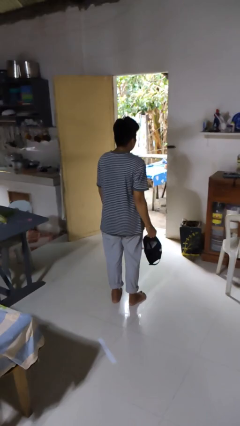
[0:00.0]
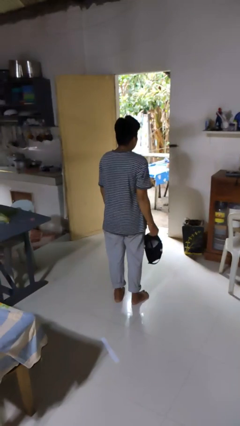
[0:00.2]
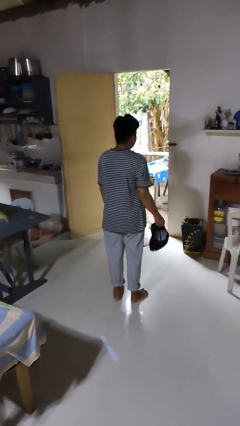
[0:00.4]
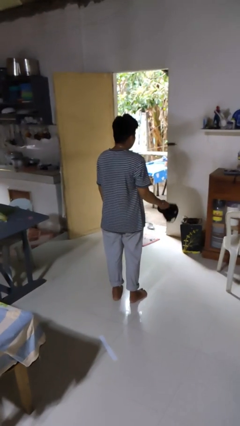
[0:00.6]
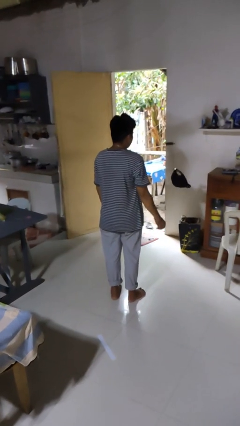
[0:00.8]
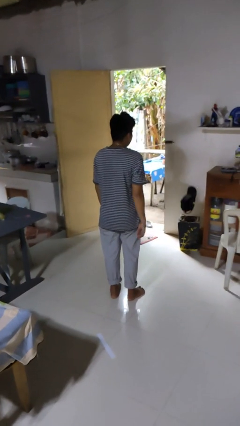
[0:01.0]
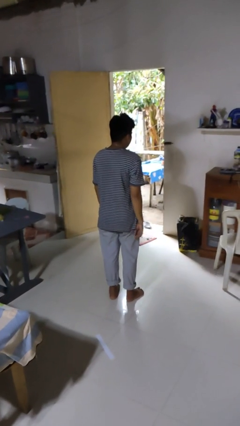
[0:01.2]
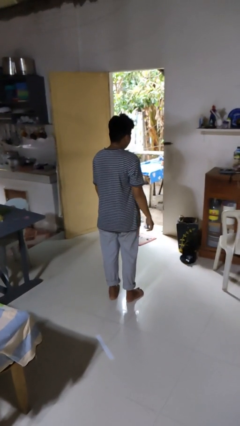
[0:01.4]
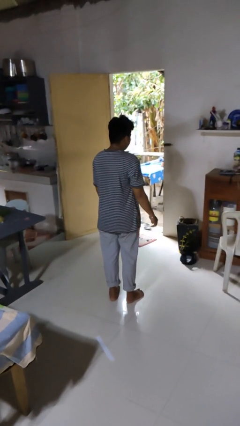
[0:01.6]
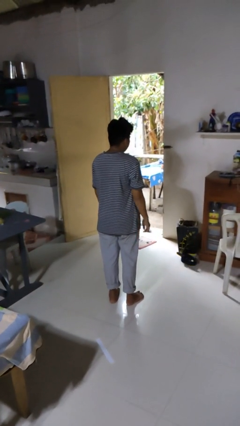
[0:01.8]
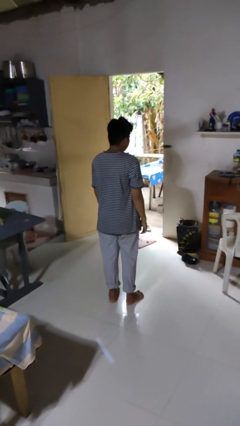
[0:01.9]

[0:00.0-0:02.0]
person throws object into air

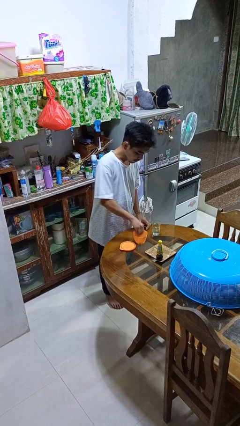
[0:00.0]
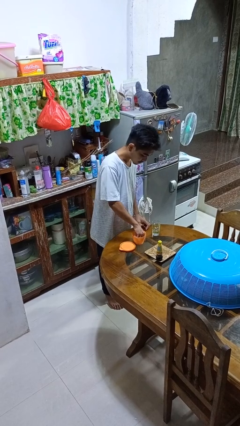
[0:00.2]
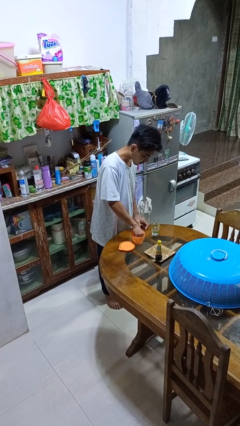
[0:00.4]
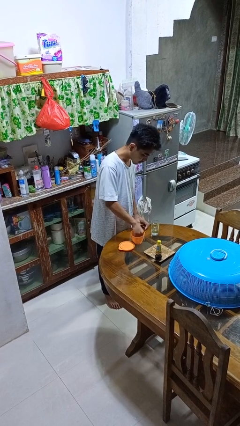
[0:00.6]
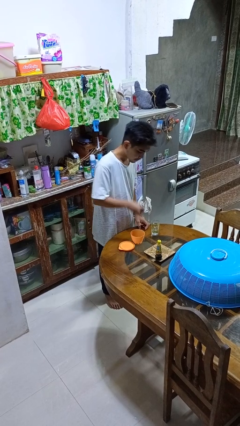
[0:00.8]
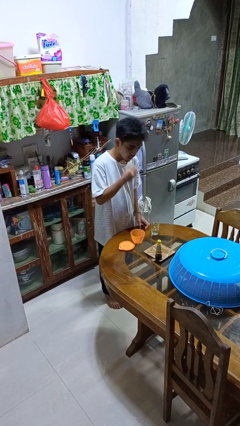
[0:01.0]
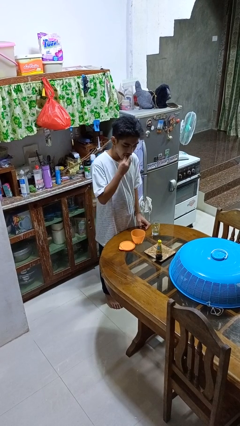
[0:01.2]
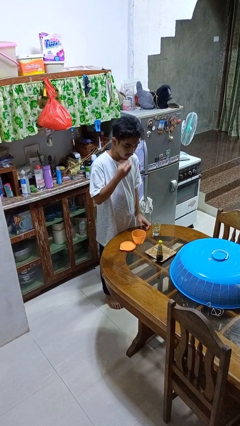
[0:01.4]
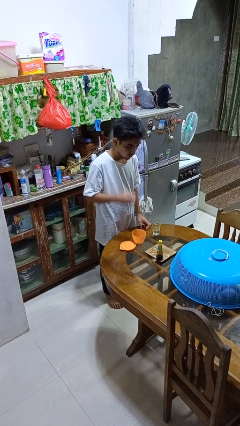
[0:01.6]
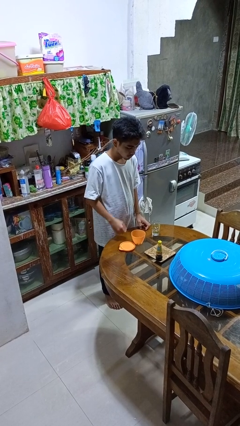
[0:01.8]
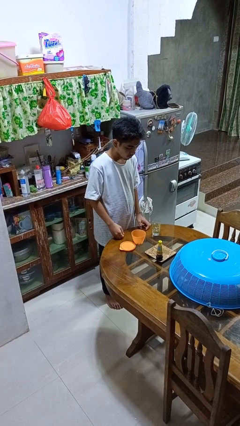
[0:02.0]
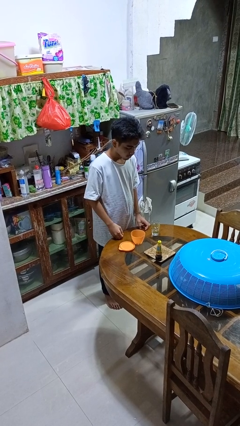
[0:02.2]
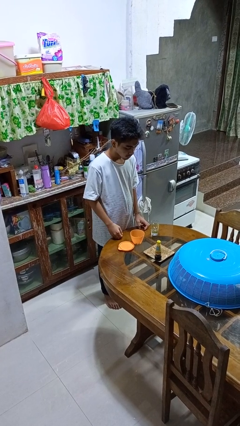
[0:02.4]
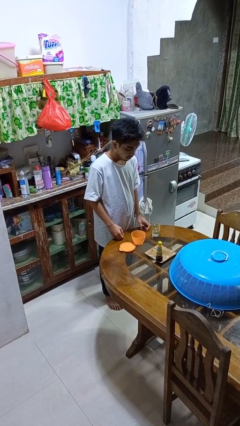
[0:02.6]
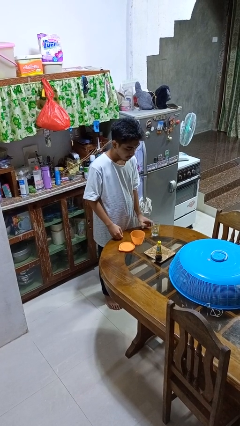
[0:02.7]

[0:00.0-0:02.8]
person takes medicine pills

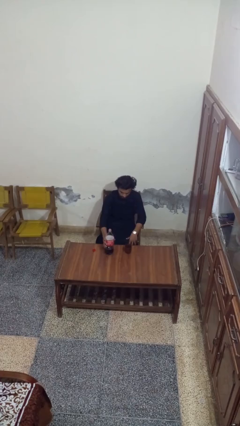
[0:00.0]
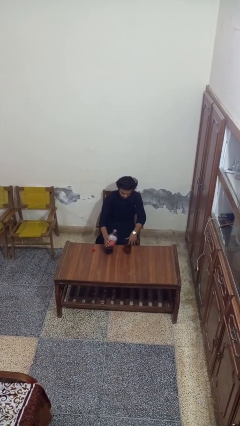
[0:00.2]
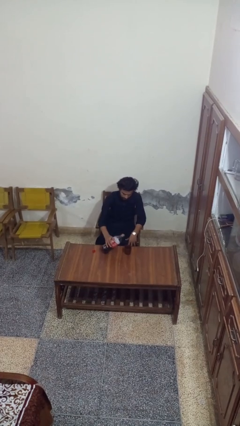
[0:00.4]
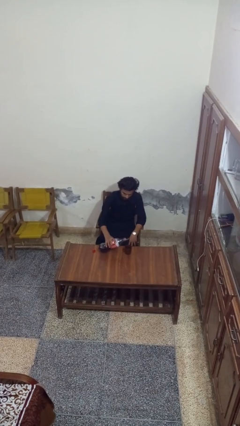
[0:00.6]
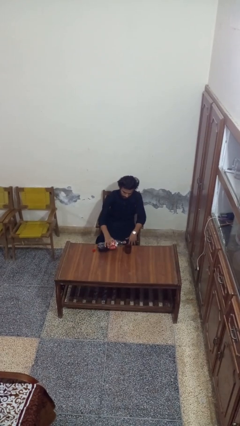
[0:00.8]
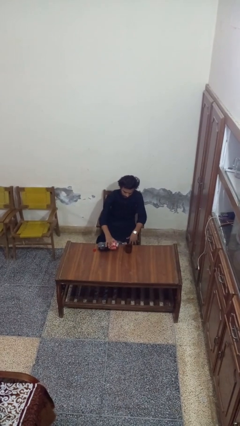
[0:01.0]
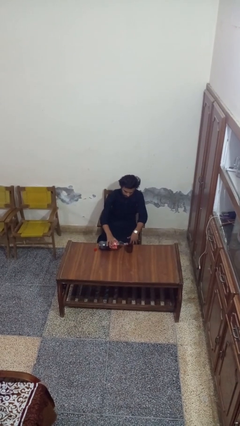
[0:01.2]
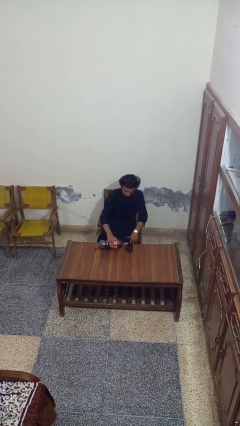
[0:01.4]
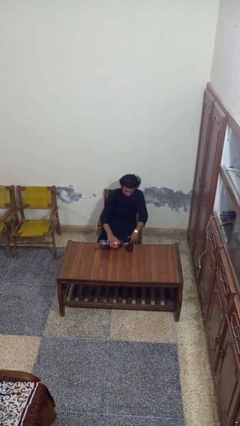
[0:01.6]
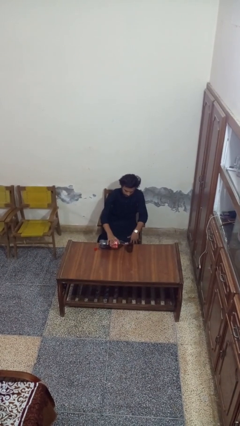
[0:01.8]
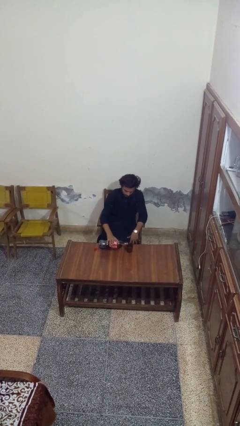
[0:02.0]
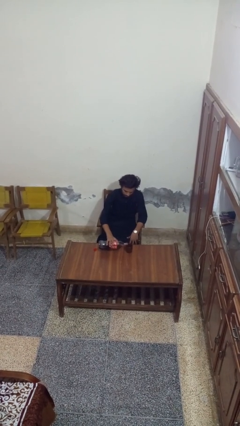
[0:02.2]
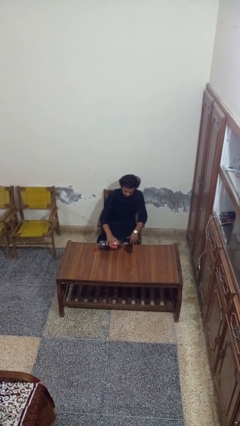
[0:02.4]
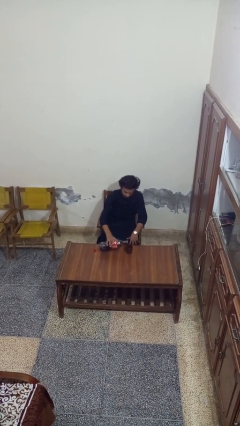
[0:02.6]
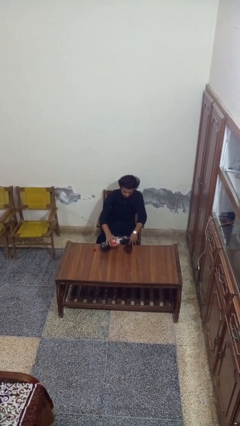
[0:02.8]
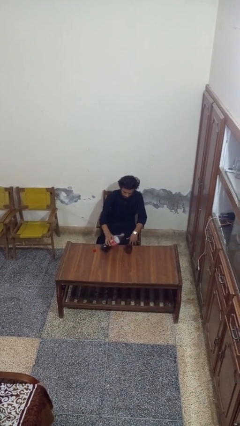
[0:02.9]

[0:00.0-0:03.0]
person pours liquid into cup

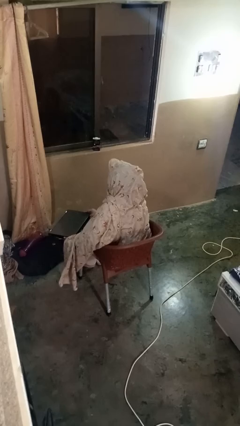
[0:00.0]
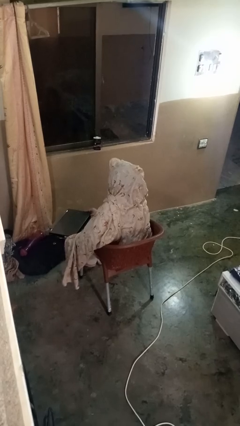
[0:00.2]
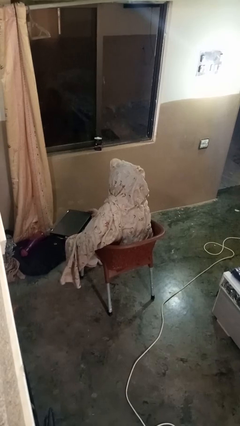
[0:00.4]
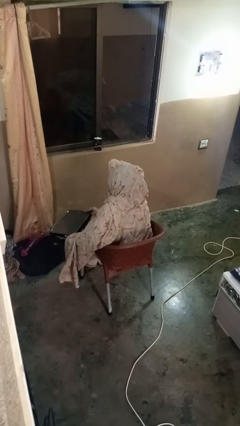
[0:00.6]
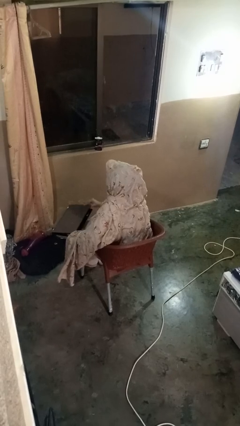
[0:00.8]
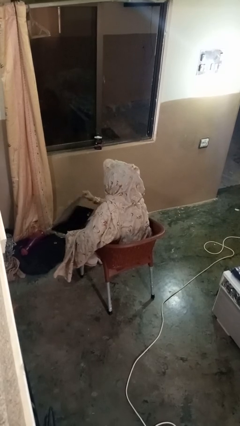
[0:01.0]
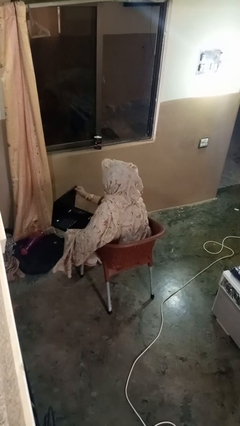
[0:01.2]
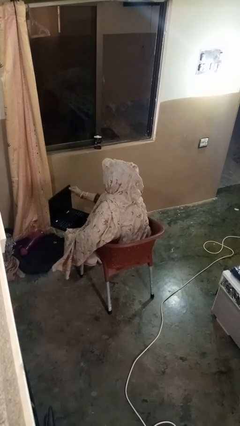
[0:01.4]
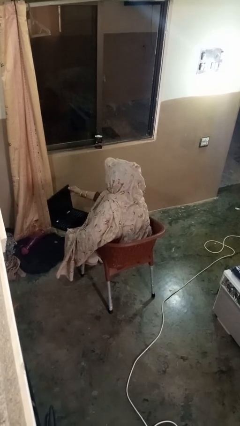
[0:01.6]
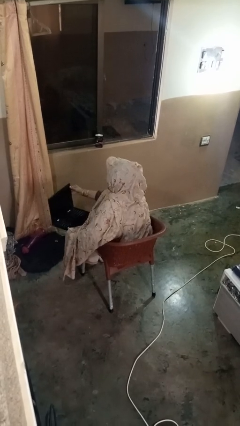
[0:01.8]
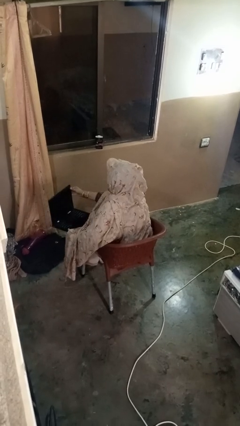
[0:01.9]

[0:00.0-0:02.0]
person opens laptop

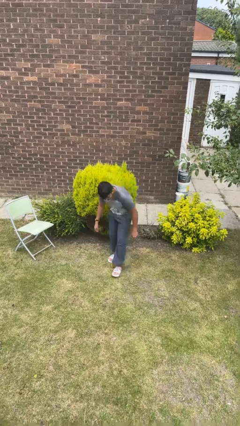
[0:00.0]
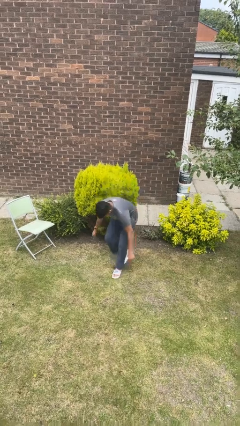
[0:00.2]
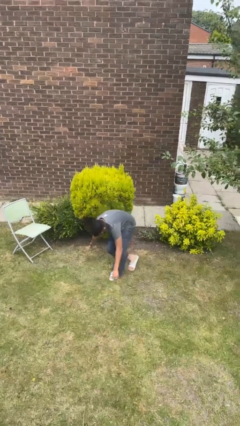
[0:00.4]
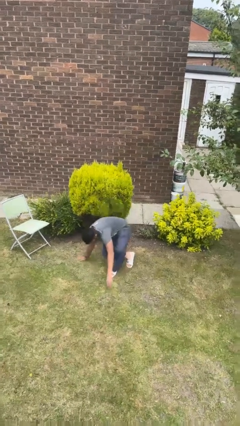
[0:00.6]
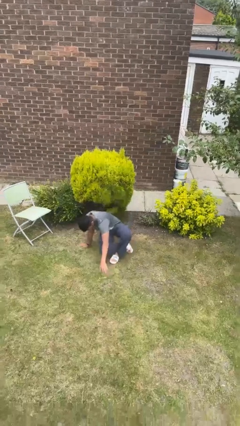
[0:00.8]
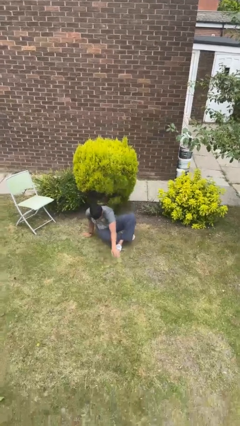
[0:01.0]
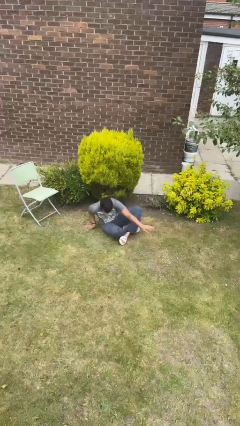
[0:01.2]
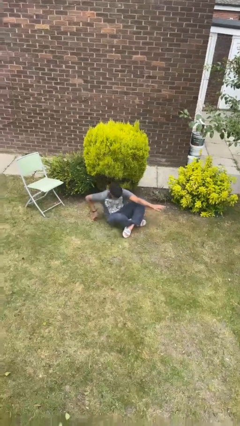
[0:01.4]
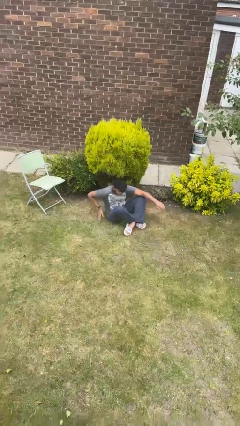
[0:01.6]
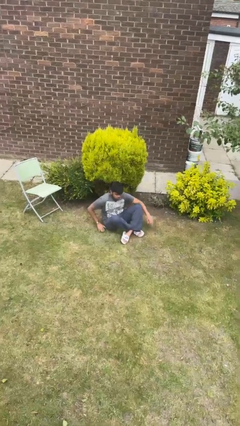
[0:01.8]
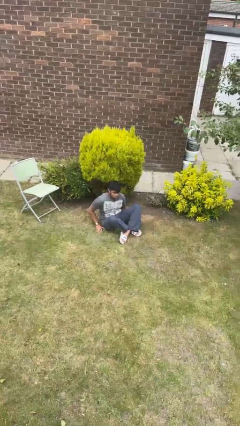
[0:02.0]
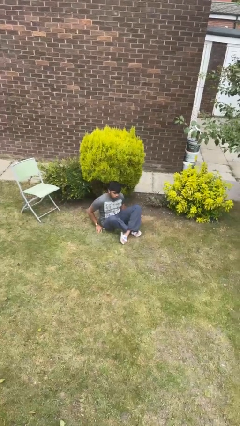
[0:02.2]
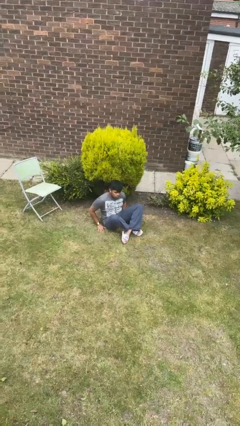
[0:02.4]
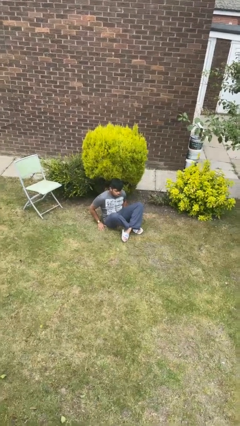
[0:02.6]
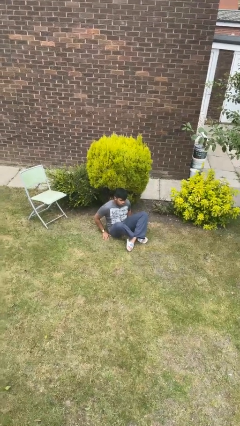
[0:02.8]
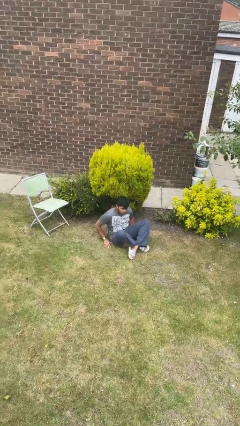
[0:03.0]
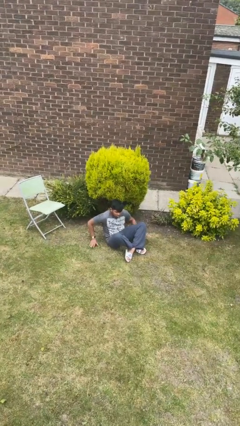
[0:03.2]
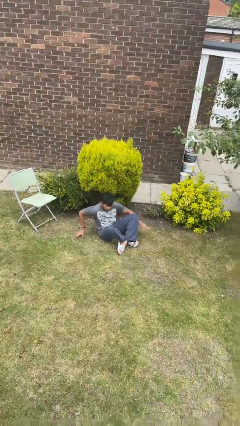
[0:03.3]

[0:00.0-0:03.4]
person sits crisscross

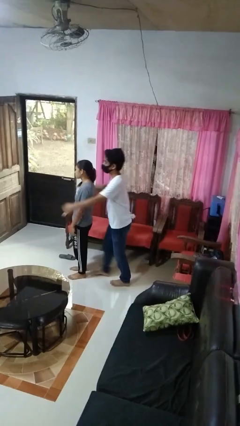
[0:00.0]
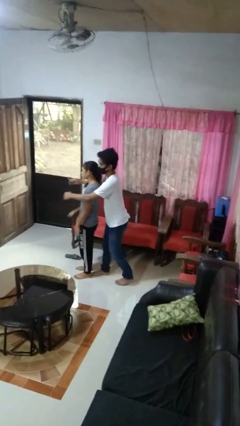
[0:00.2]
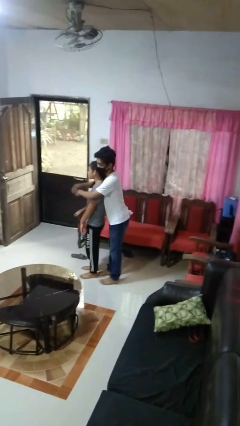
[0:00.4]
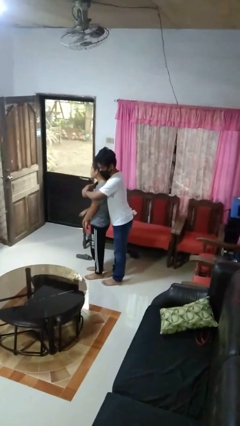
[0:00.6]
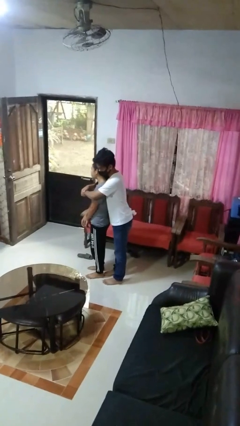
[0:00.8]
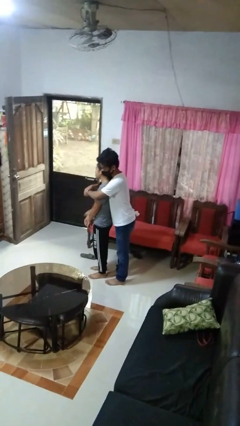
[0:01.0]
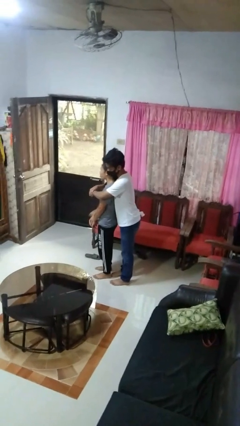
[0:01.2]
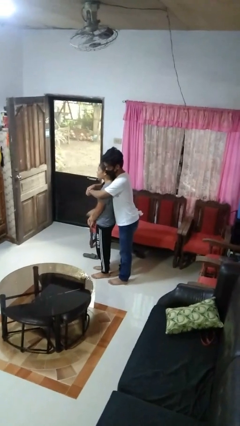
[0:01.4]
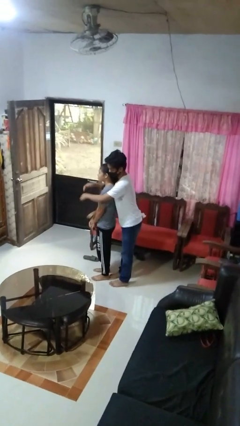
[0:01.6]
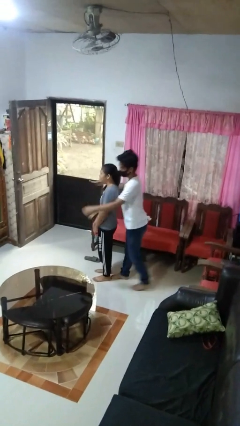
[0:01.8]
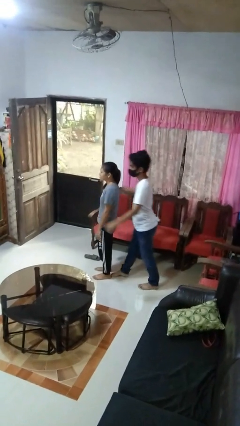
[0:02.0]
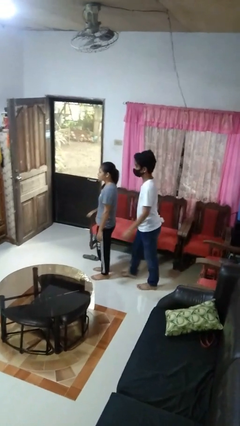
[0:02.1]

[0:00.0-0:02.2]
person hugs person from behind

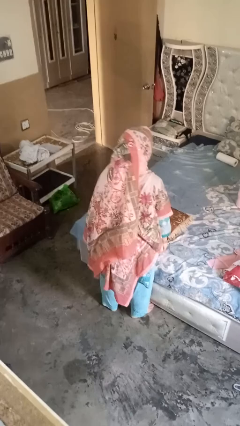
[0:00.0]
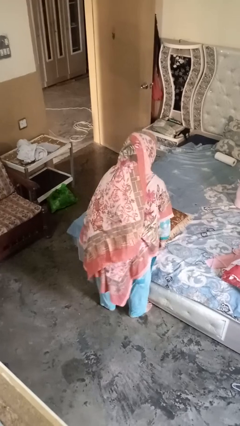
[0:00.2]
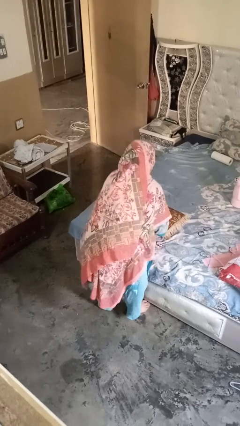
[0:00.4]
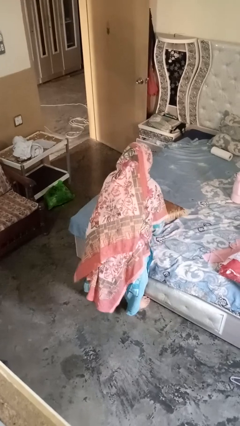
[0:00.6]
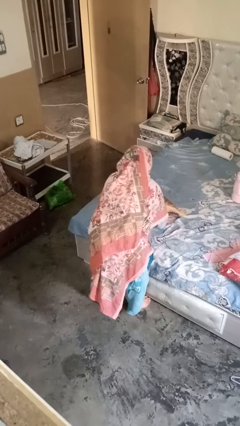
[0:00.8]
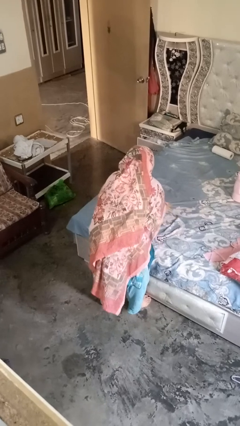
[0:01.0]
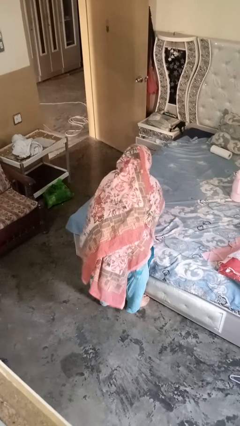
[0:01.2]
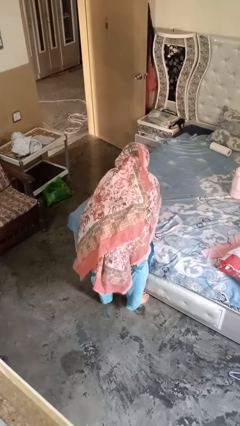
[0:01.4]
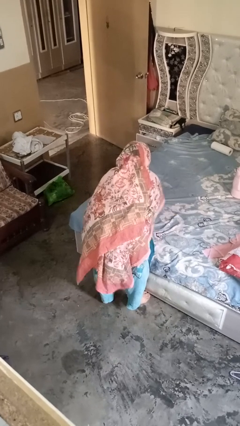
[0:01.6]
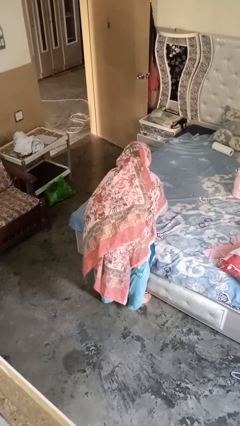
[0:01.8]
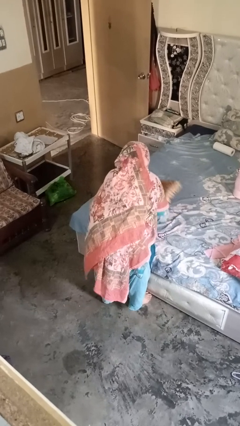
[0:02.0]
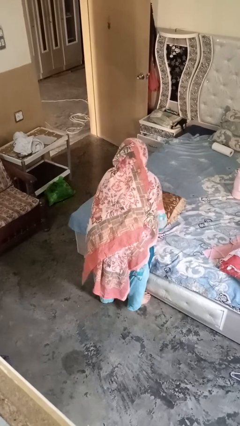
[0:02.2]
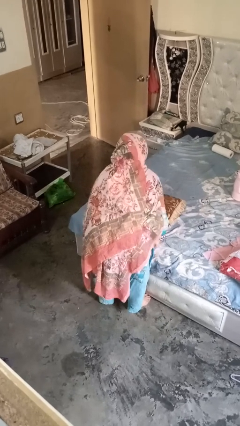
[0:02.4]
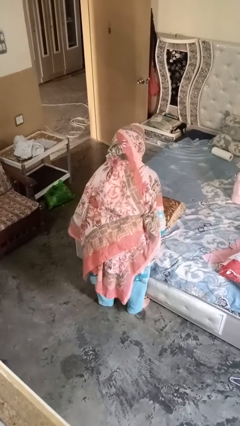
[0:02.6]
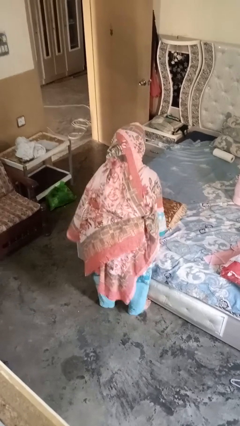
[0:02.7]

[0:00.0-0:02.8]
person searches under bed
